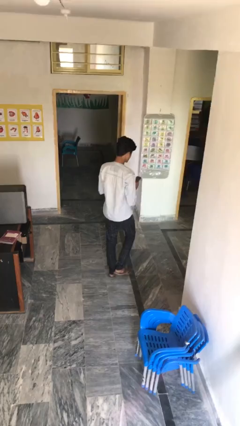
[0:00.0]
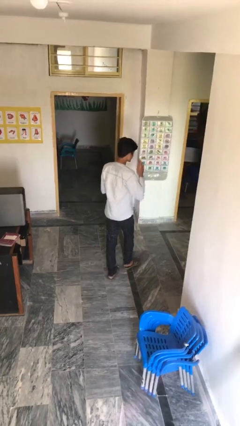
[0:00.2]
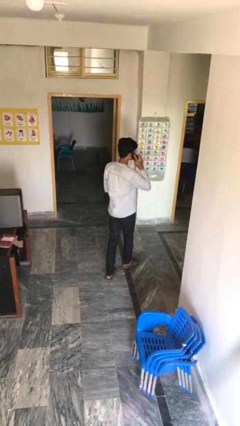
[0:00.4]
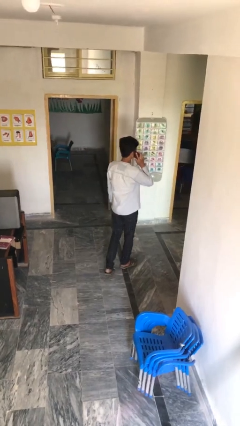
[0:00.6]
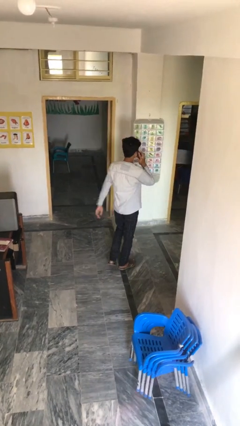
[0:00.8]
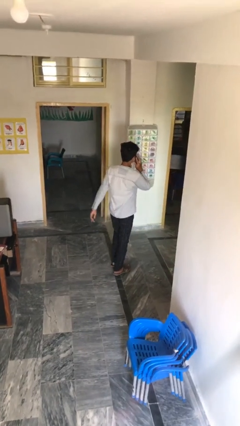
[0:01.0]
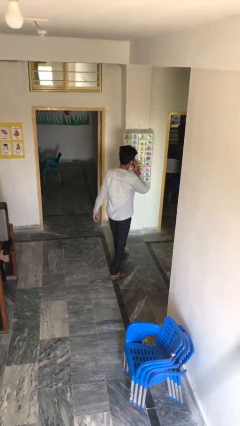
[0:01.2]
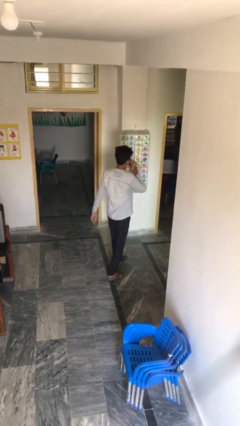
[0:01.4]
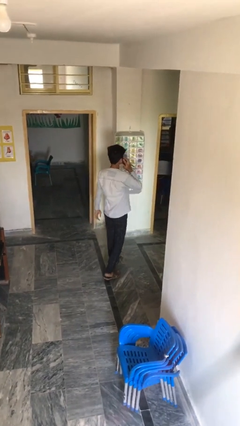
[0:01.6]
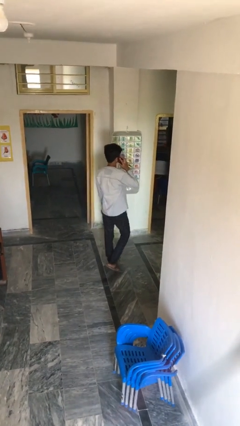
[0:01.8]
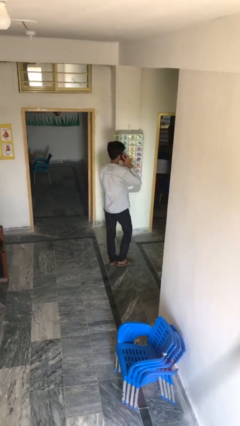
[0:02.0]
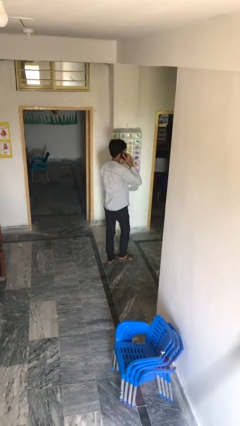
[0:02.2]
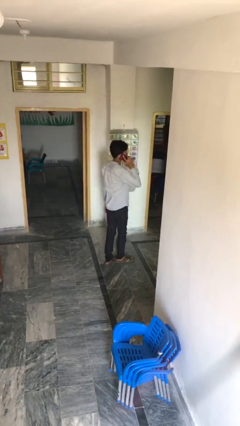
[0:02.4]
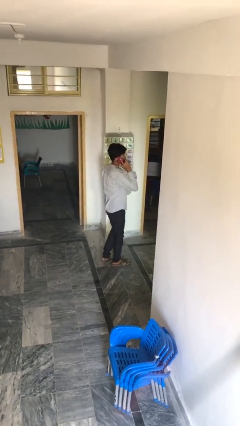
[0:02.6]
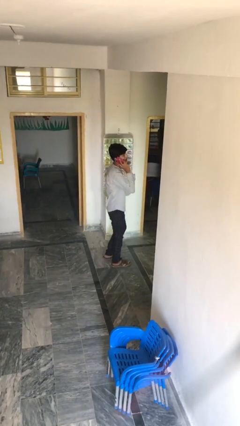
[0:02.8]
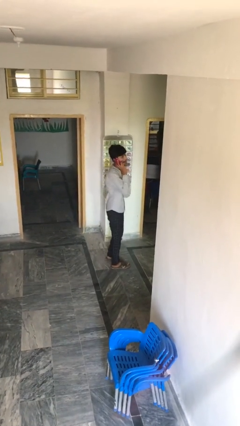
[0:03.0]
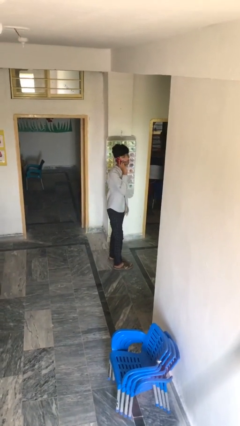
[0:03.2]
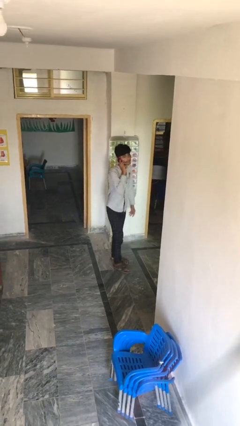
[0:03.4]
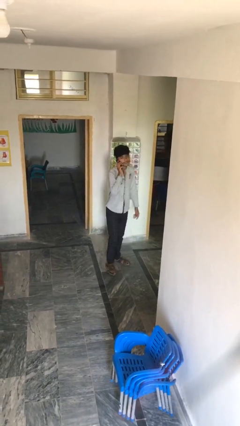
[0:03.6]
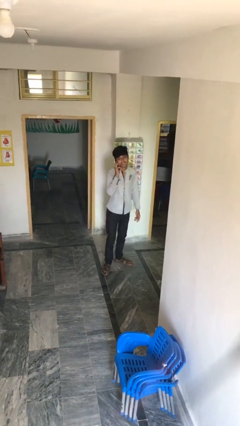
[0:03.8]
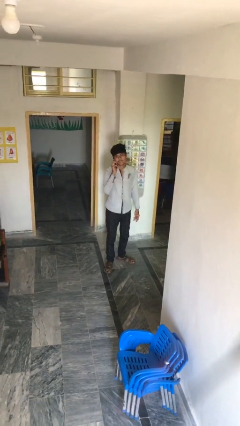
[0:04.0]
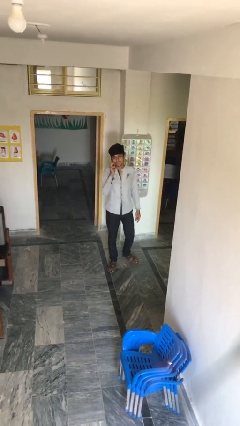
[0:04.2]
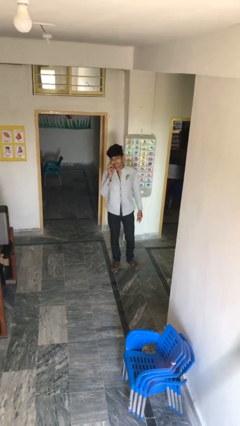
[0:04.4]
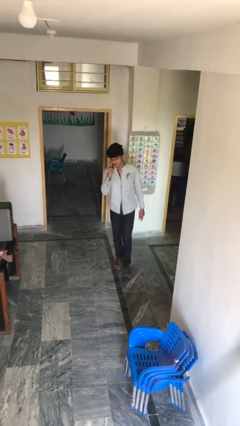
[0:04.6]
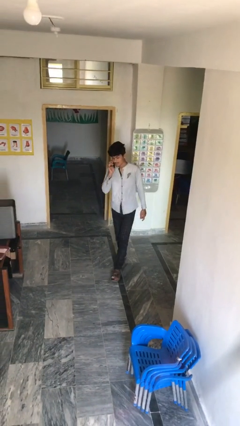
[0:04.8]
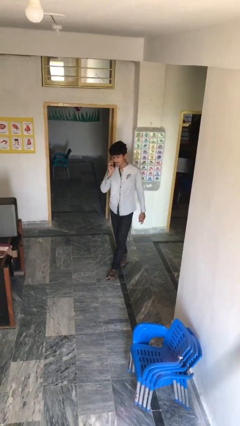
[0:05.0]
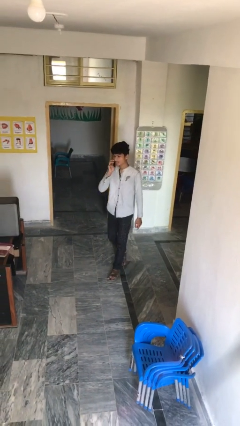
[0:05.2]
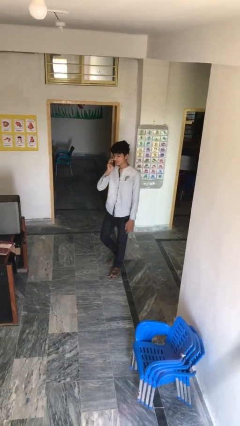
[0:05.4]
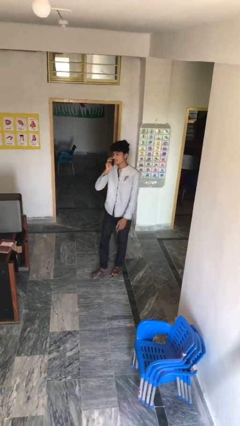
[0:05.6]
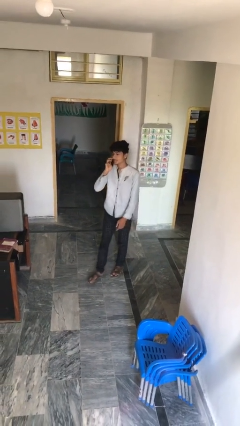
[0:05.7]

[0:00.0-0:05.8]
person talks on phone

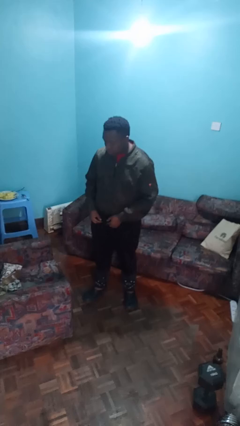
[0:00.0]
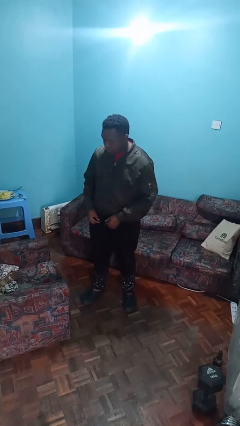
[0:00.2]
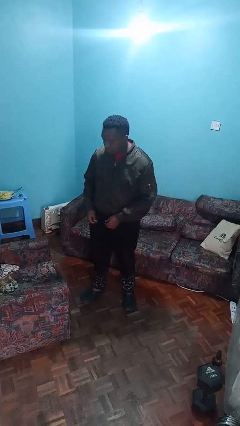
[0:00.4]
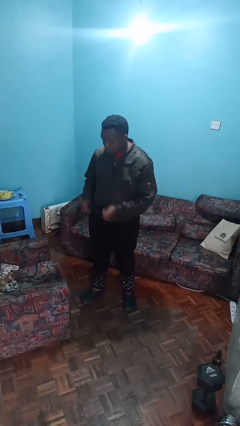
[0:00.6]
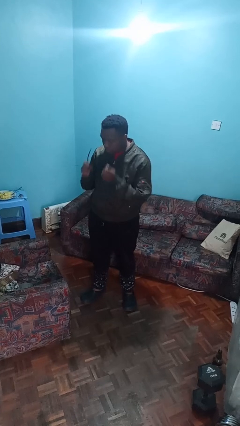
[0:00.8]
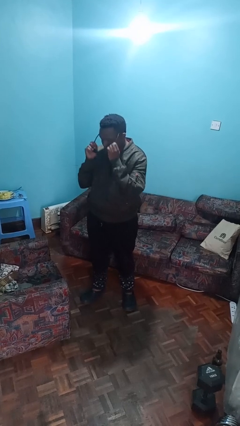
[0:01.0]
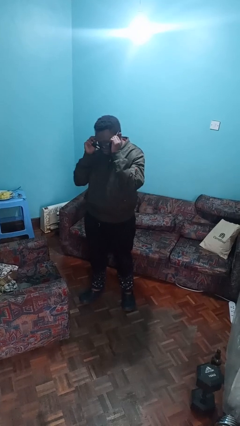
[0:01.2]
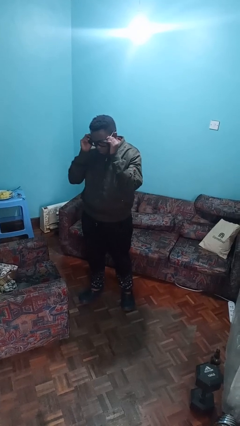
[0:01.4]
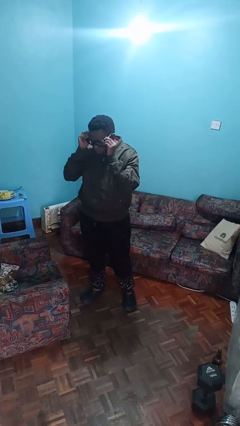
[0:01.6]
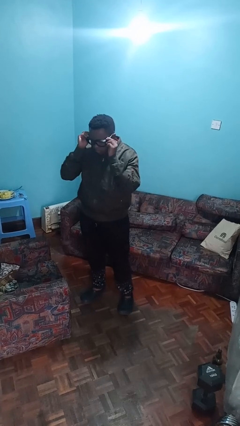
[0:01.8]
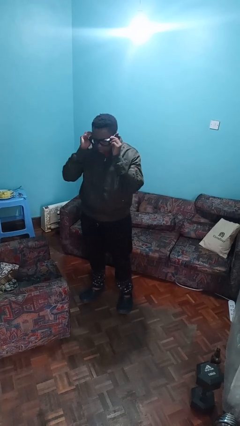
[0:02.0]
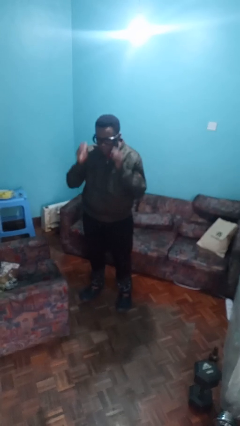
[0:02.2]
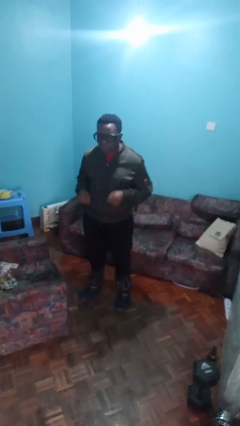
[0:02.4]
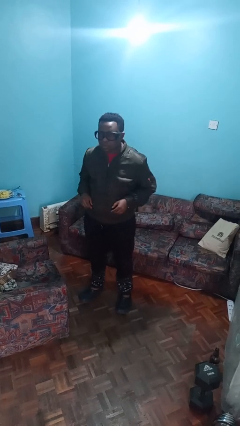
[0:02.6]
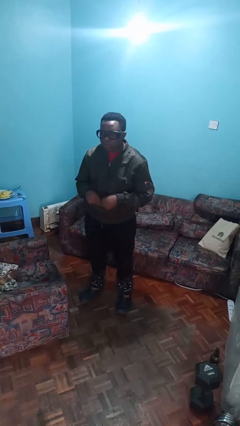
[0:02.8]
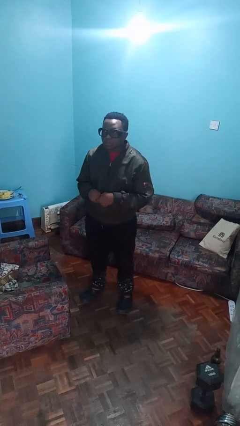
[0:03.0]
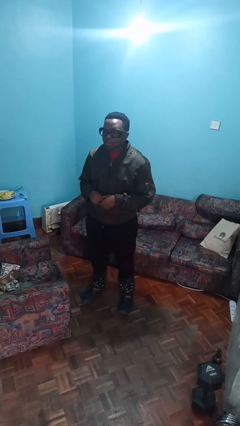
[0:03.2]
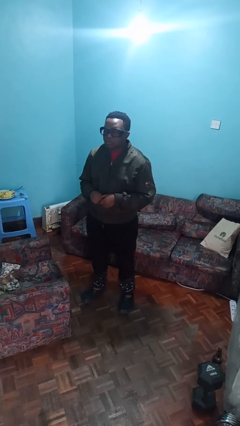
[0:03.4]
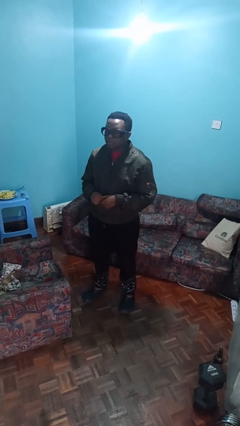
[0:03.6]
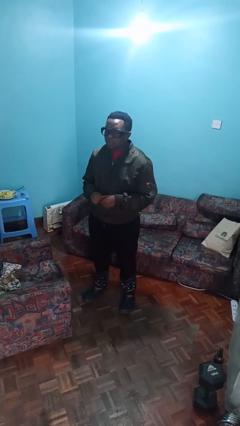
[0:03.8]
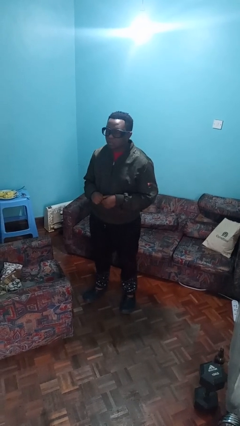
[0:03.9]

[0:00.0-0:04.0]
person puts on glasses

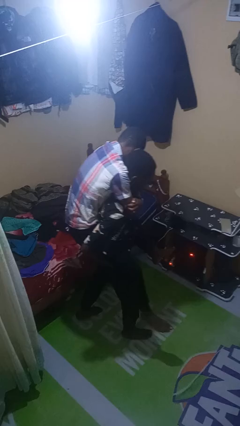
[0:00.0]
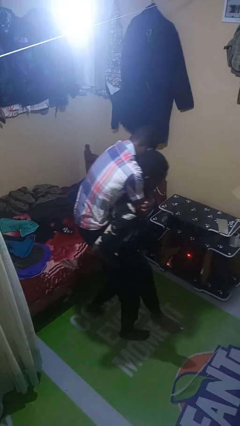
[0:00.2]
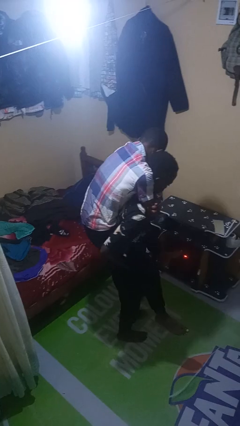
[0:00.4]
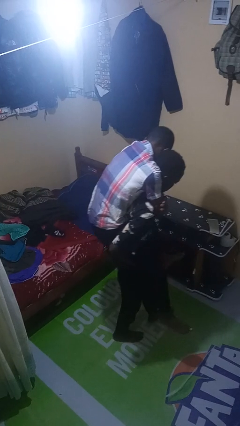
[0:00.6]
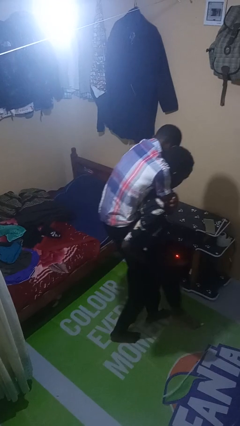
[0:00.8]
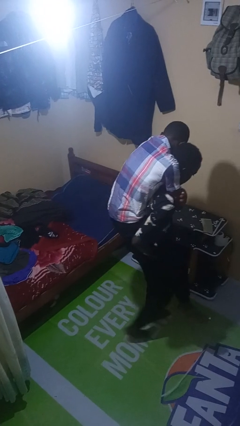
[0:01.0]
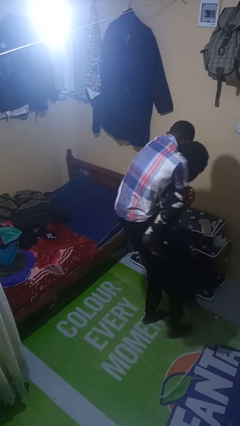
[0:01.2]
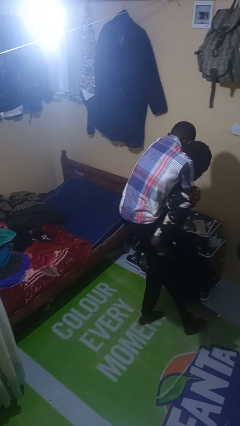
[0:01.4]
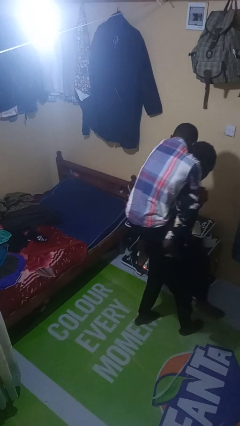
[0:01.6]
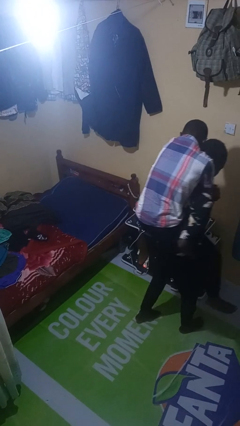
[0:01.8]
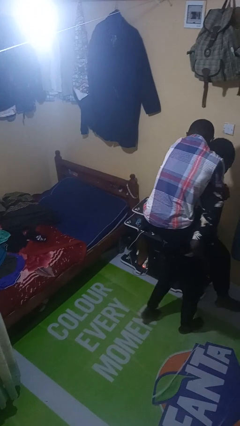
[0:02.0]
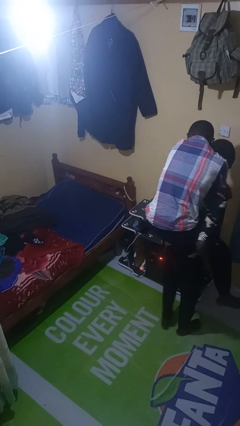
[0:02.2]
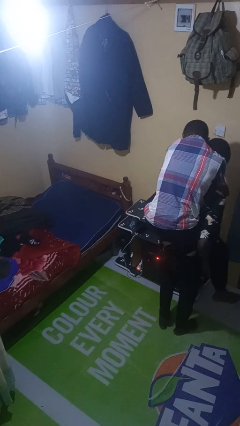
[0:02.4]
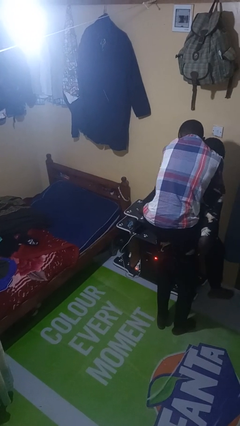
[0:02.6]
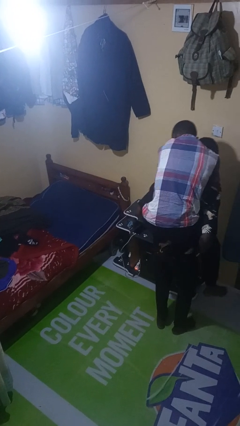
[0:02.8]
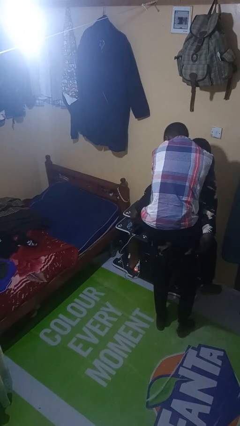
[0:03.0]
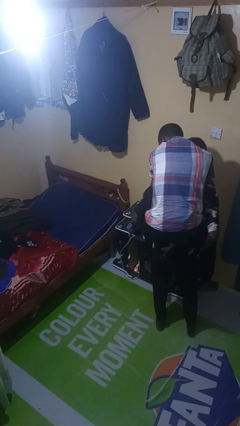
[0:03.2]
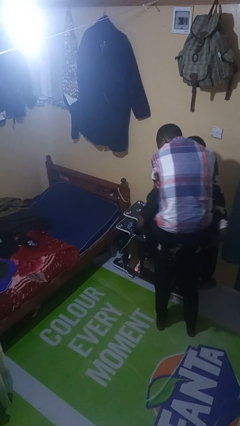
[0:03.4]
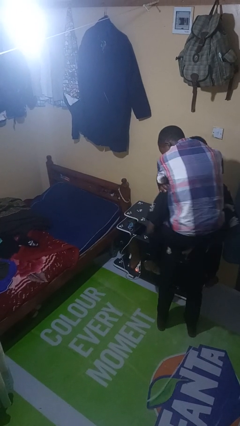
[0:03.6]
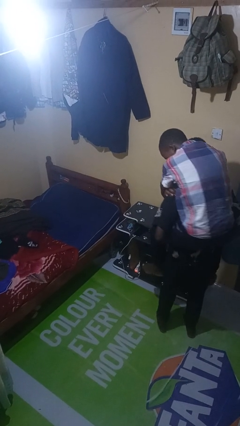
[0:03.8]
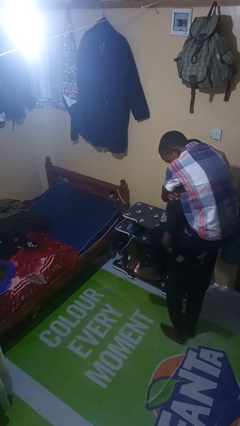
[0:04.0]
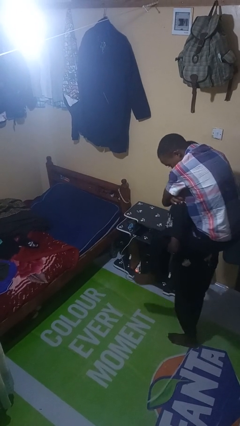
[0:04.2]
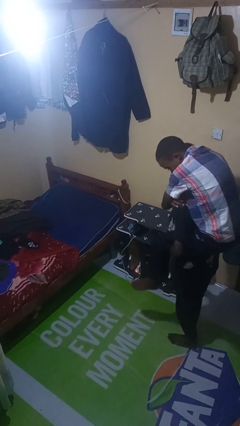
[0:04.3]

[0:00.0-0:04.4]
person carries person on back

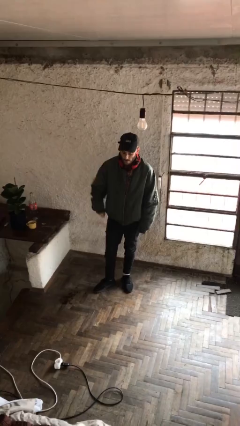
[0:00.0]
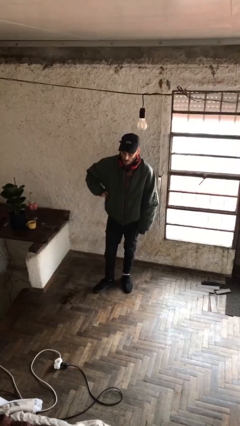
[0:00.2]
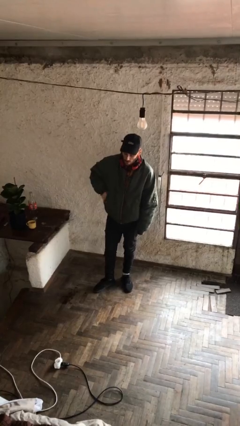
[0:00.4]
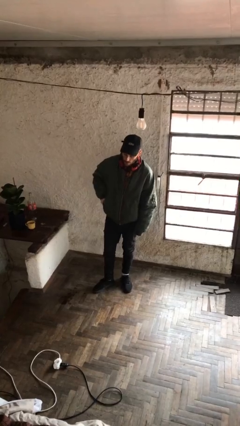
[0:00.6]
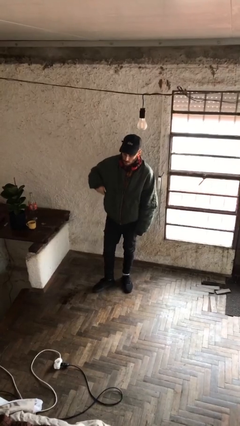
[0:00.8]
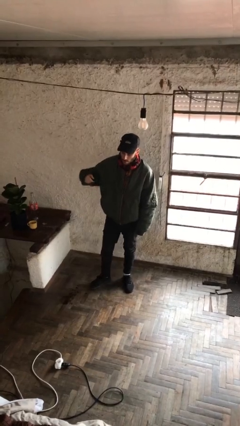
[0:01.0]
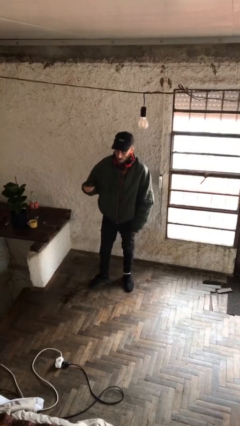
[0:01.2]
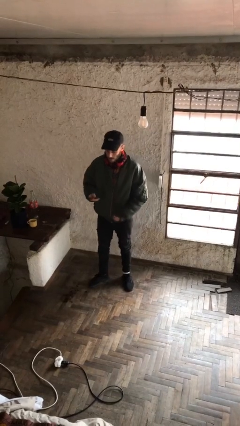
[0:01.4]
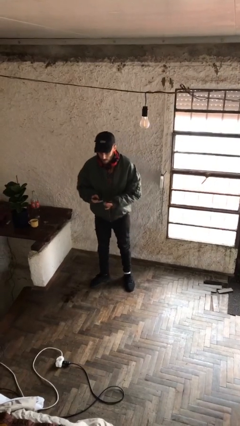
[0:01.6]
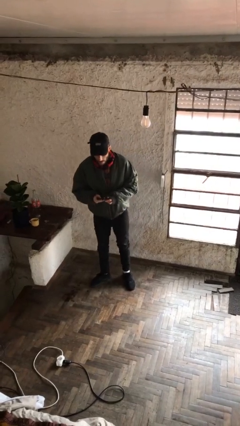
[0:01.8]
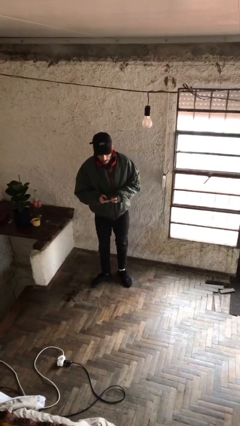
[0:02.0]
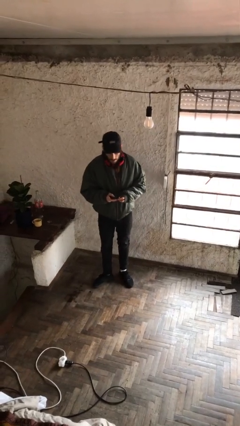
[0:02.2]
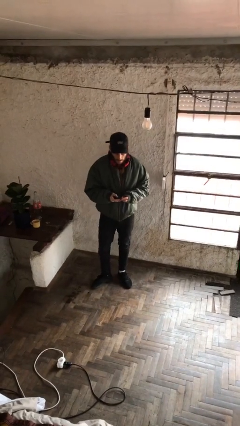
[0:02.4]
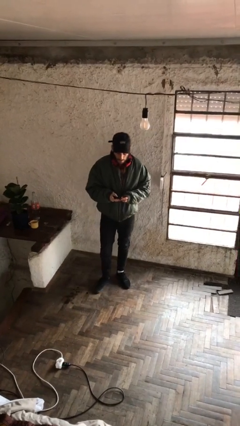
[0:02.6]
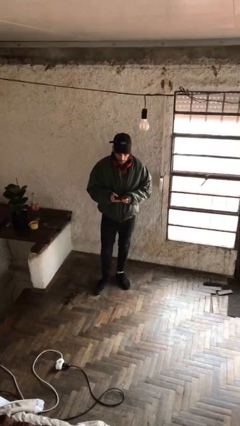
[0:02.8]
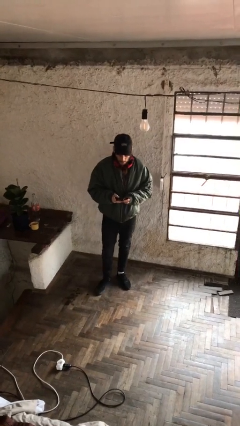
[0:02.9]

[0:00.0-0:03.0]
person takes phone from pocket
